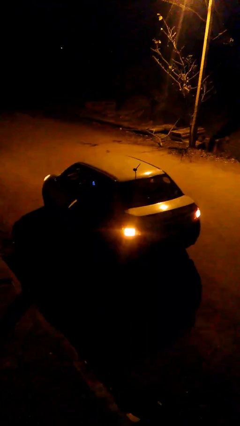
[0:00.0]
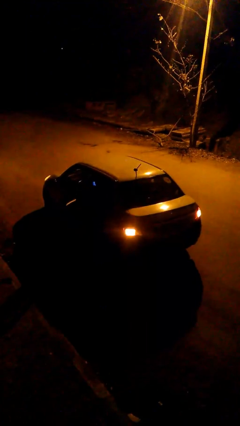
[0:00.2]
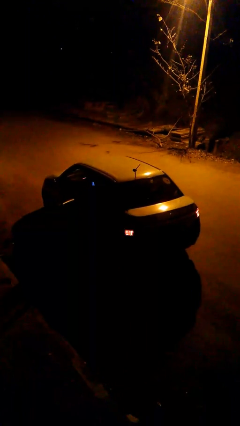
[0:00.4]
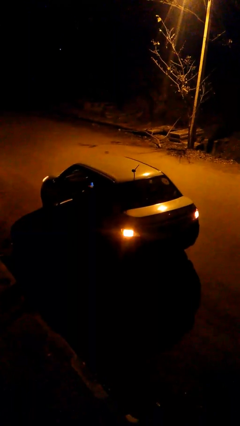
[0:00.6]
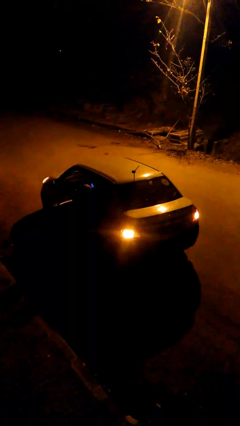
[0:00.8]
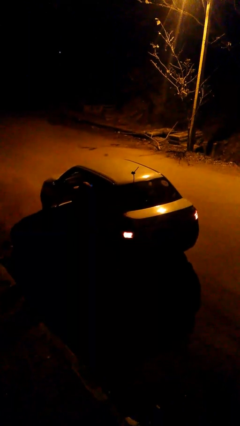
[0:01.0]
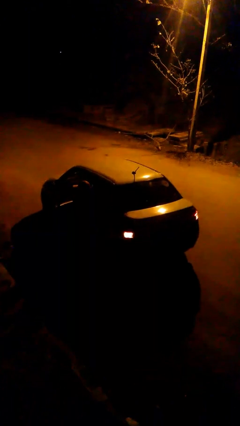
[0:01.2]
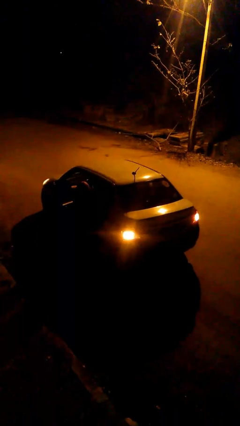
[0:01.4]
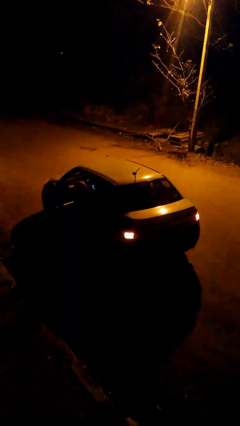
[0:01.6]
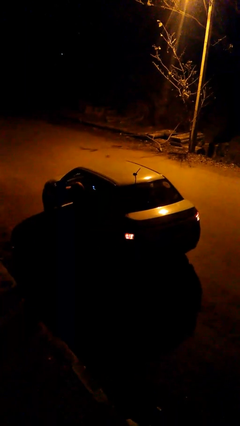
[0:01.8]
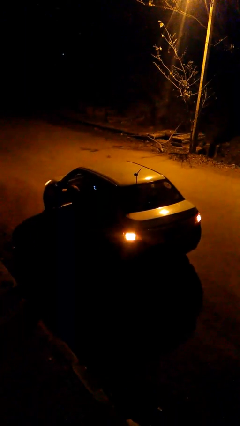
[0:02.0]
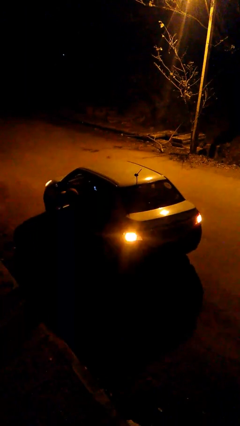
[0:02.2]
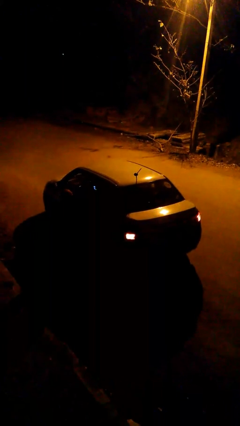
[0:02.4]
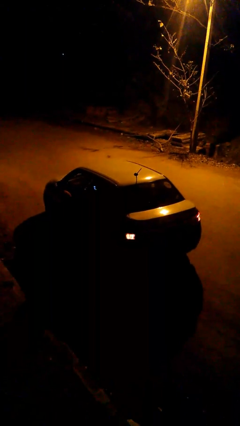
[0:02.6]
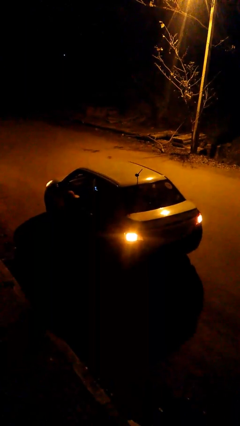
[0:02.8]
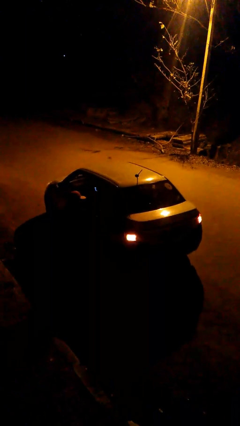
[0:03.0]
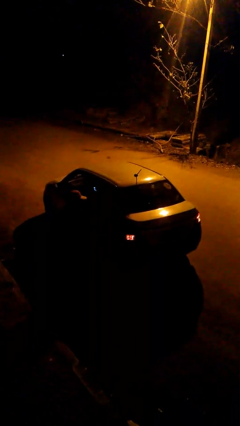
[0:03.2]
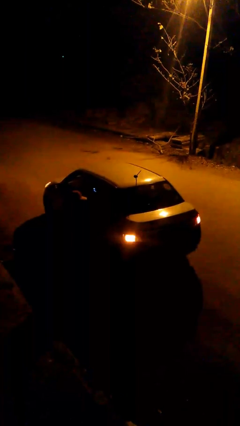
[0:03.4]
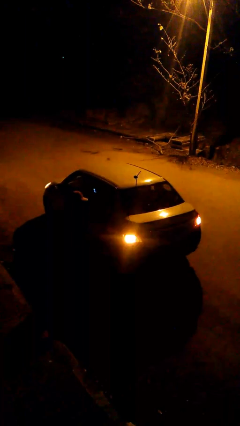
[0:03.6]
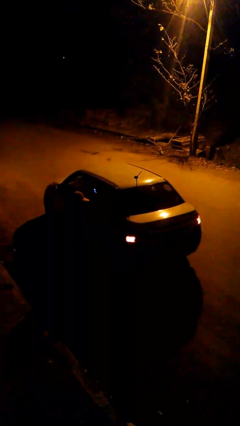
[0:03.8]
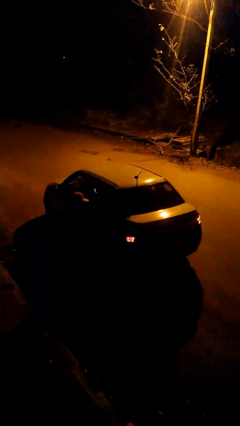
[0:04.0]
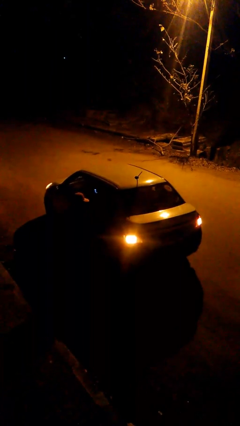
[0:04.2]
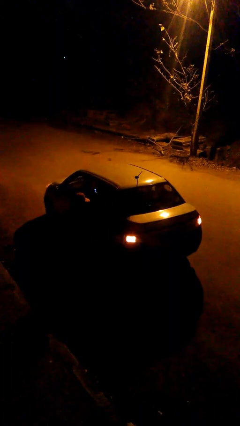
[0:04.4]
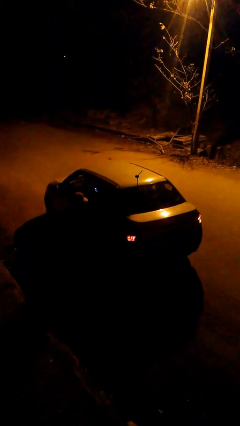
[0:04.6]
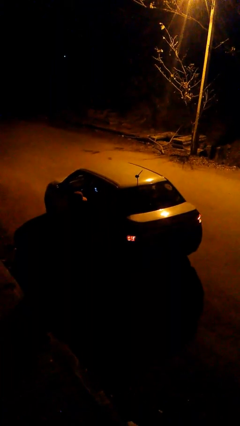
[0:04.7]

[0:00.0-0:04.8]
car drops off person

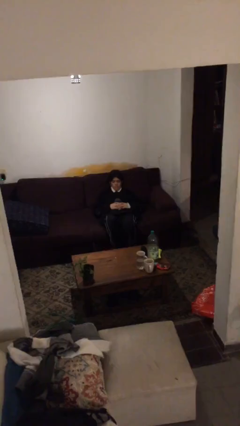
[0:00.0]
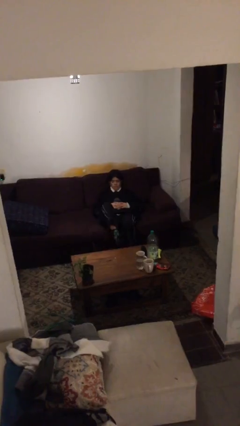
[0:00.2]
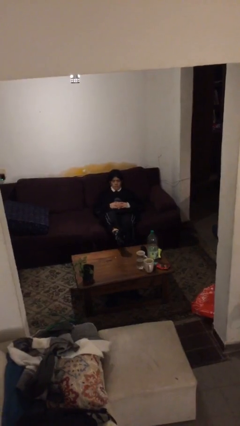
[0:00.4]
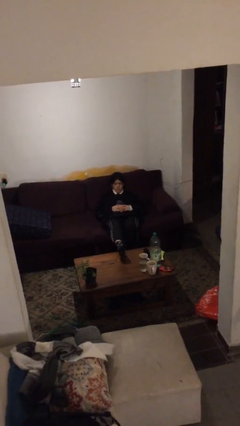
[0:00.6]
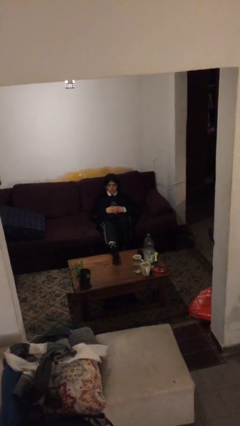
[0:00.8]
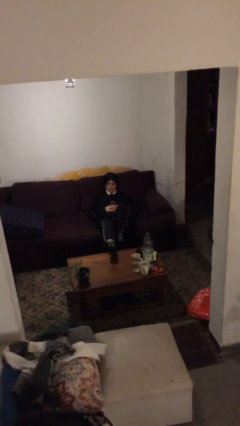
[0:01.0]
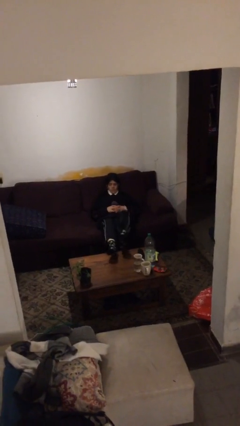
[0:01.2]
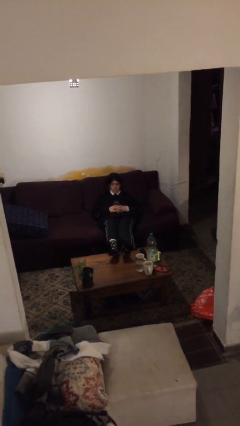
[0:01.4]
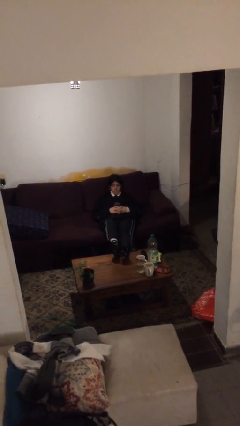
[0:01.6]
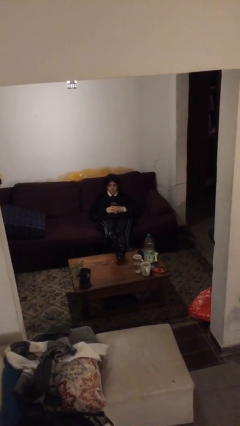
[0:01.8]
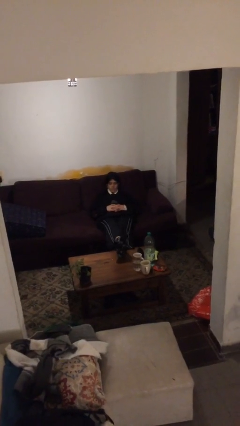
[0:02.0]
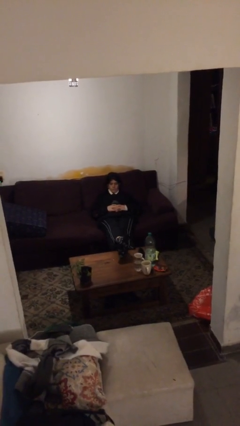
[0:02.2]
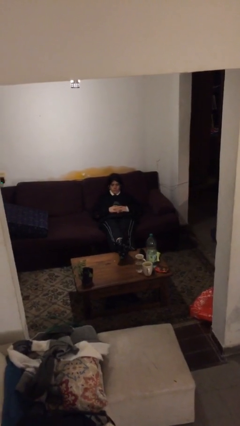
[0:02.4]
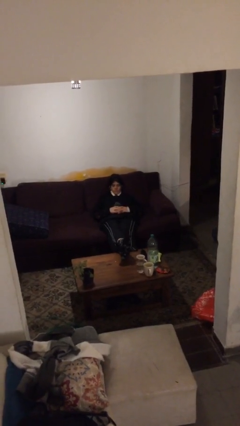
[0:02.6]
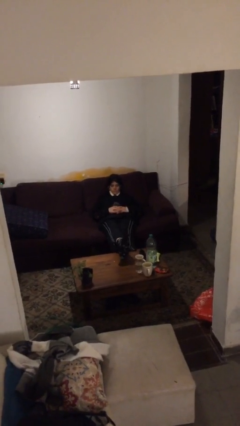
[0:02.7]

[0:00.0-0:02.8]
person puts feet up

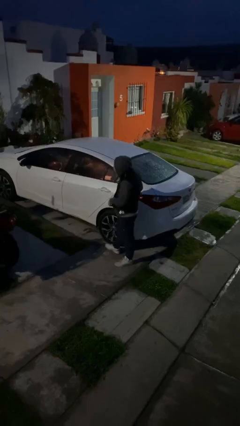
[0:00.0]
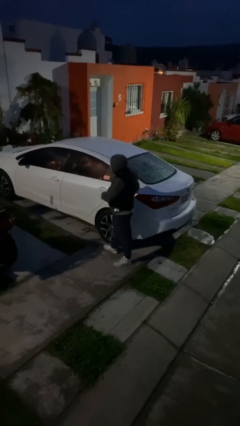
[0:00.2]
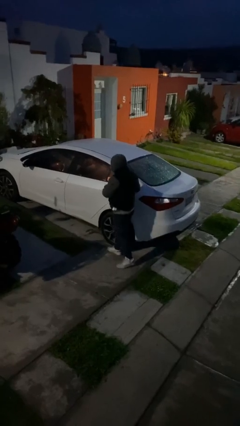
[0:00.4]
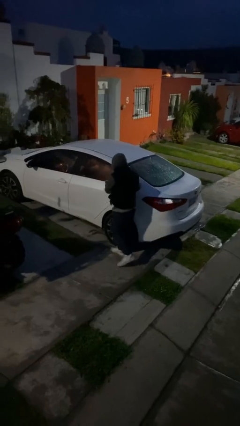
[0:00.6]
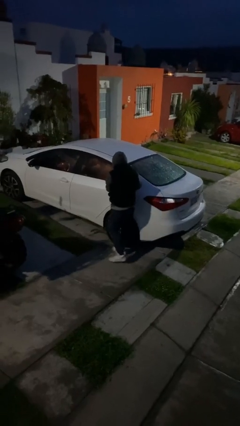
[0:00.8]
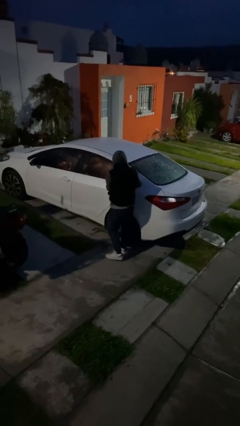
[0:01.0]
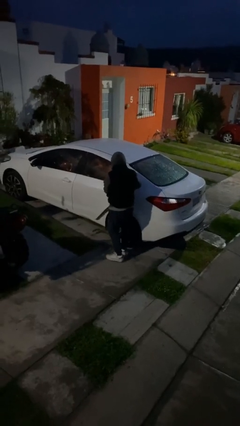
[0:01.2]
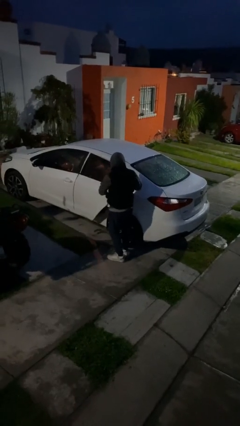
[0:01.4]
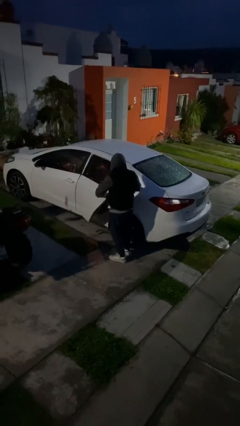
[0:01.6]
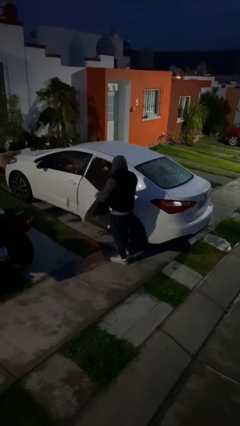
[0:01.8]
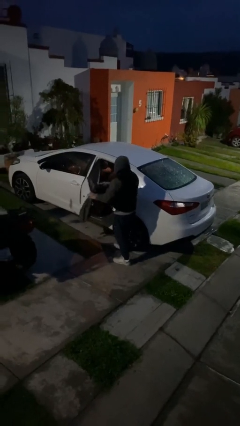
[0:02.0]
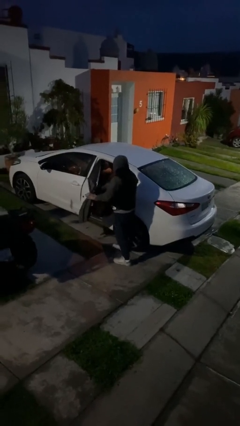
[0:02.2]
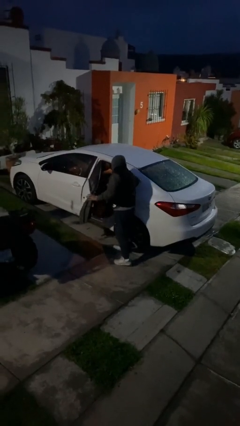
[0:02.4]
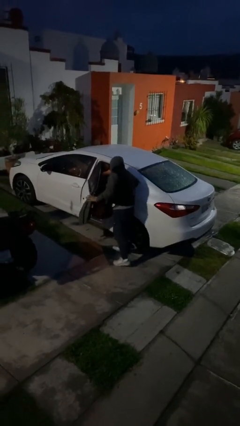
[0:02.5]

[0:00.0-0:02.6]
person opens car door

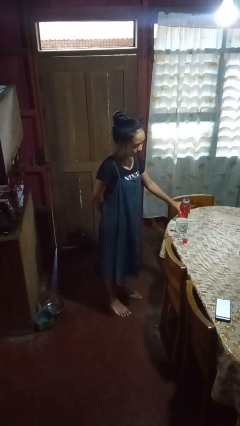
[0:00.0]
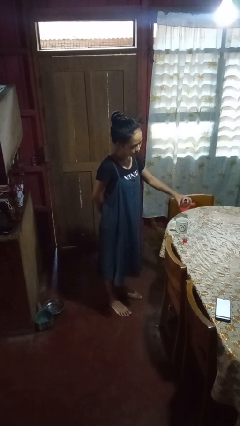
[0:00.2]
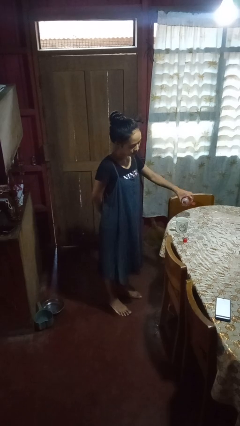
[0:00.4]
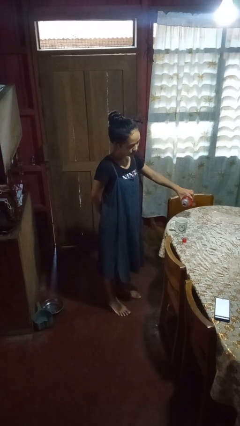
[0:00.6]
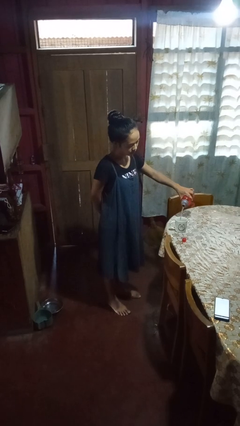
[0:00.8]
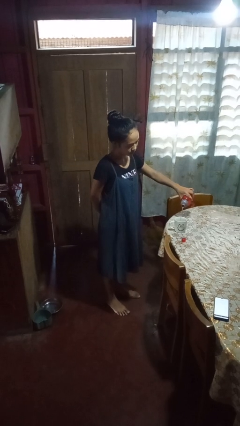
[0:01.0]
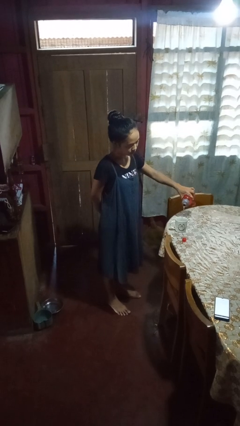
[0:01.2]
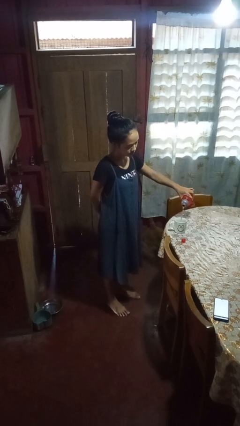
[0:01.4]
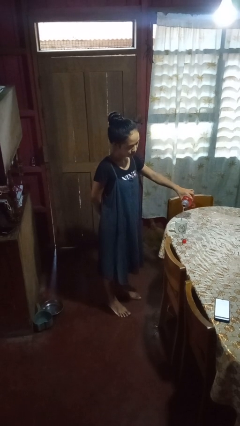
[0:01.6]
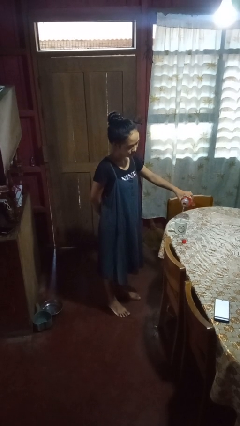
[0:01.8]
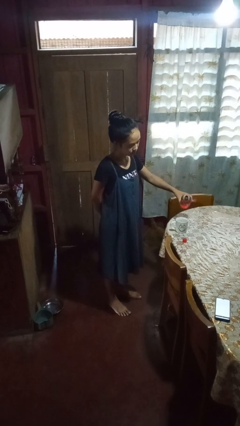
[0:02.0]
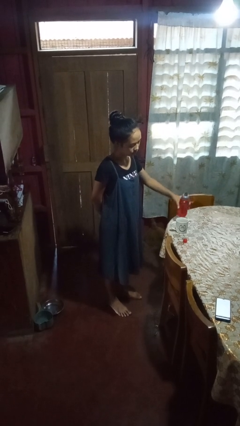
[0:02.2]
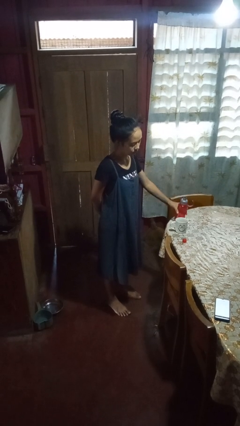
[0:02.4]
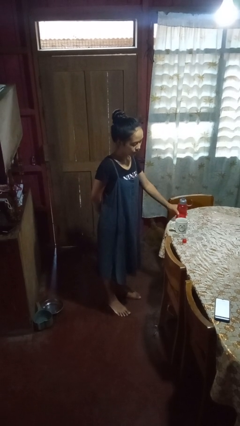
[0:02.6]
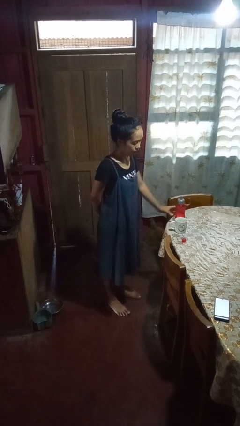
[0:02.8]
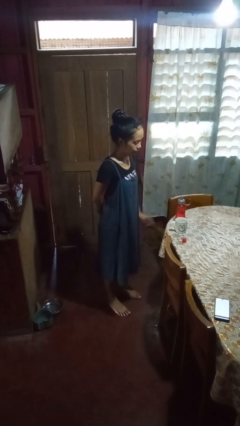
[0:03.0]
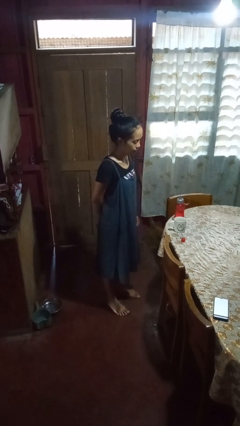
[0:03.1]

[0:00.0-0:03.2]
person pours liquid into cup

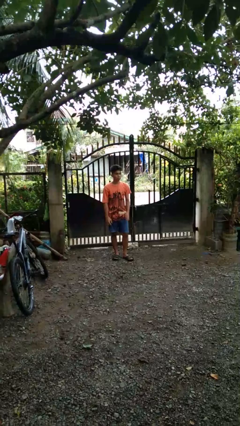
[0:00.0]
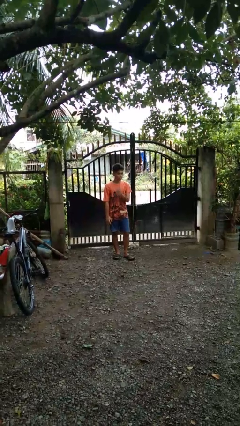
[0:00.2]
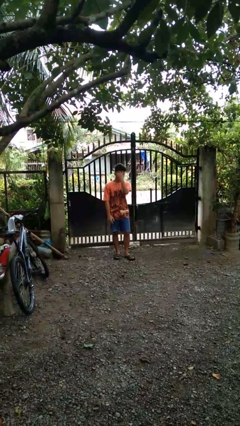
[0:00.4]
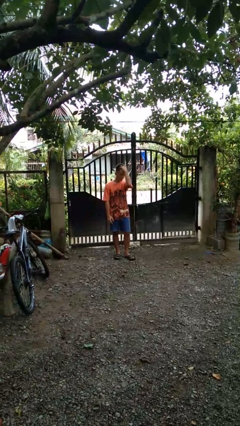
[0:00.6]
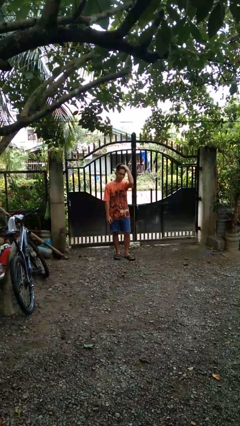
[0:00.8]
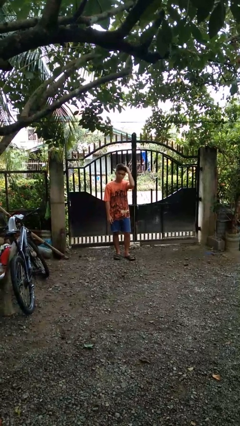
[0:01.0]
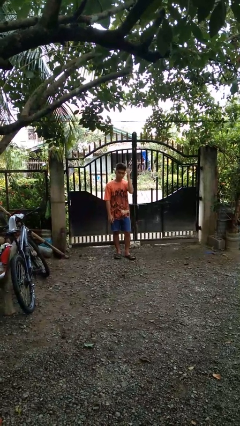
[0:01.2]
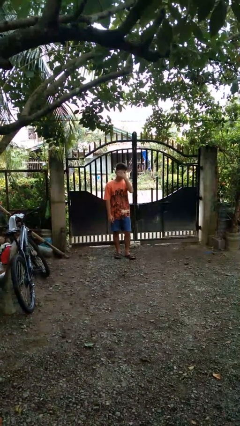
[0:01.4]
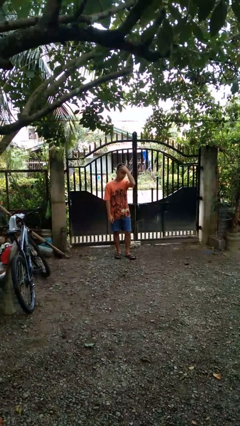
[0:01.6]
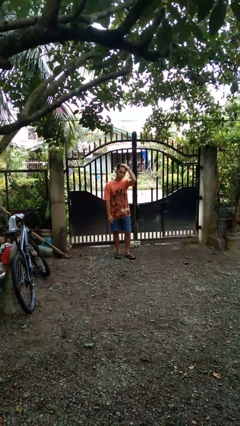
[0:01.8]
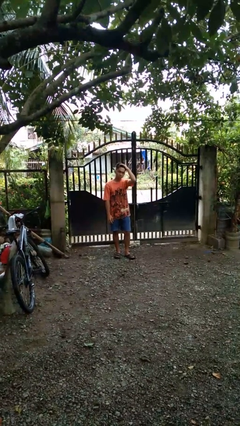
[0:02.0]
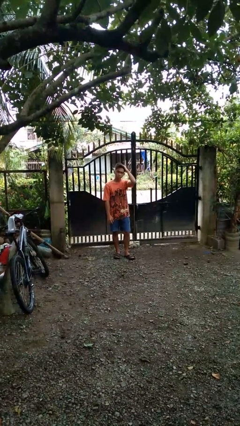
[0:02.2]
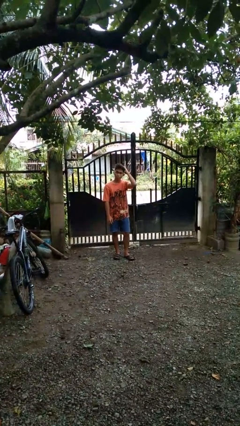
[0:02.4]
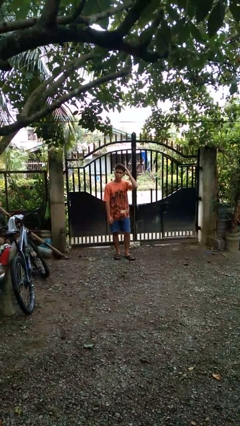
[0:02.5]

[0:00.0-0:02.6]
person strokes hair

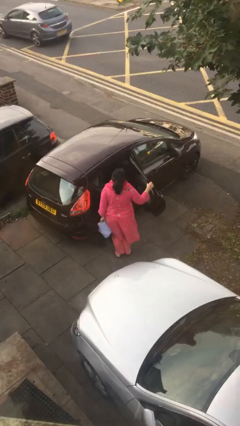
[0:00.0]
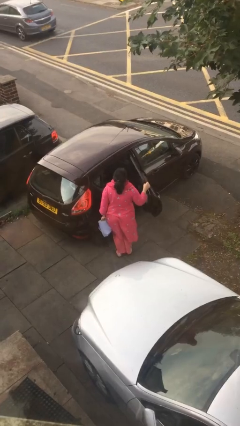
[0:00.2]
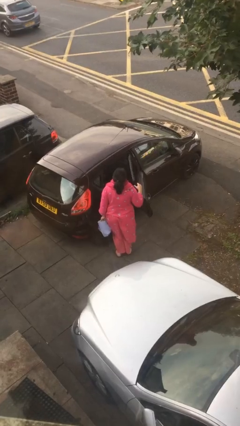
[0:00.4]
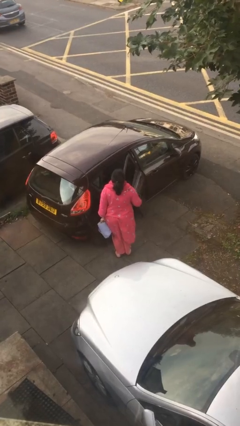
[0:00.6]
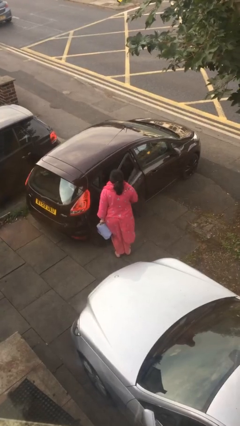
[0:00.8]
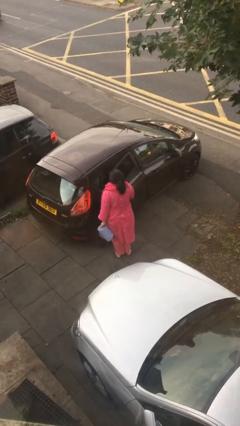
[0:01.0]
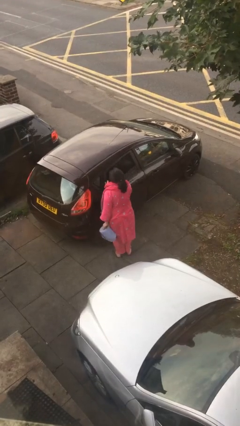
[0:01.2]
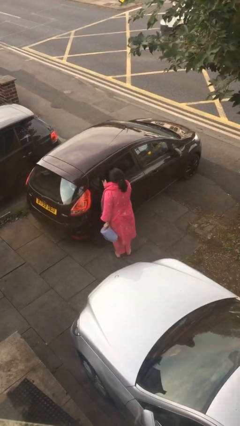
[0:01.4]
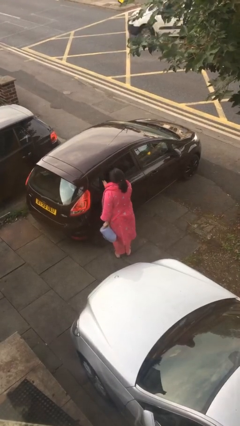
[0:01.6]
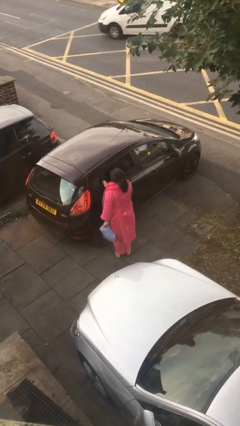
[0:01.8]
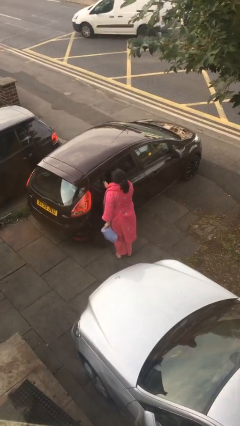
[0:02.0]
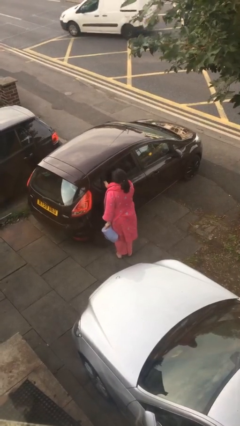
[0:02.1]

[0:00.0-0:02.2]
person closes car door
